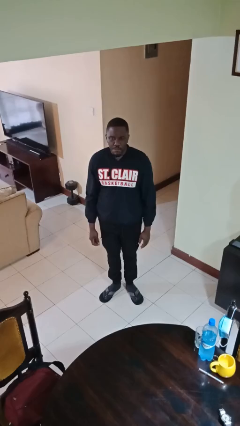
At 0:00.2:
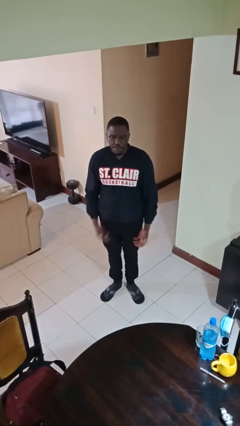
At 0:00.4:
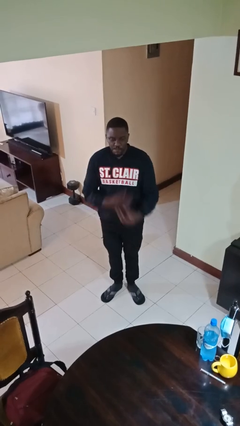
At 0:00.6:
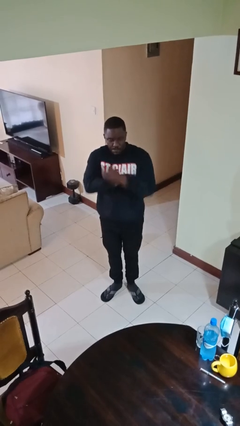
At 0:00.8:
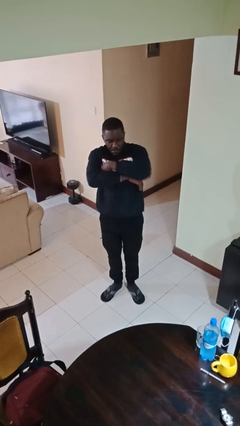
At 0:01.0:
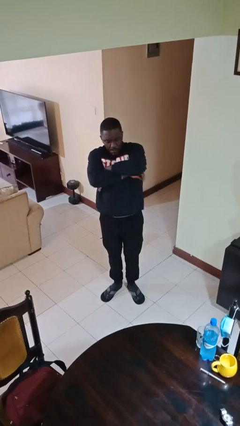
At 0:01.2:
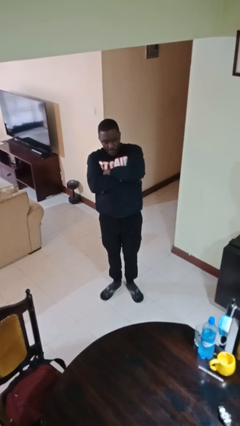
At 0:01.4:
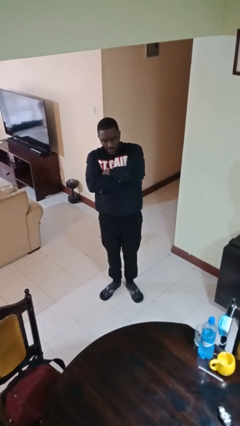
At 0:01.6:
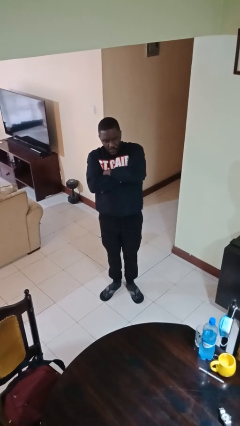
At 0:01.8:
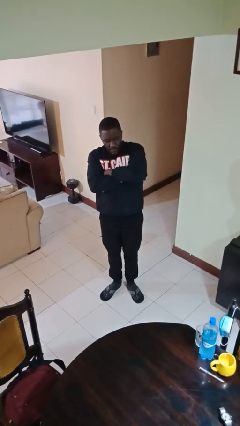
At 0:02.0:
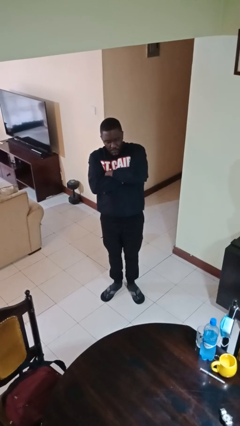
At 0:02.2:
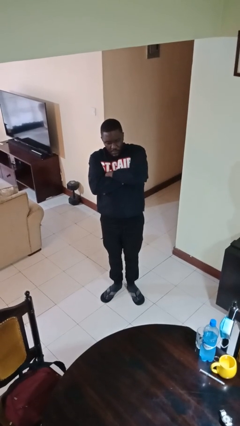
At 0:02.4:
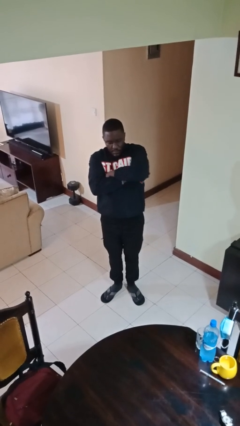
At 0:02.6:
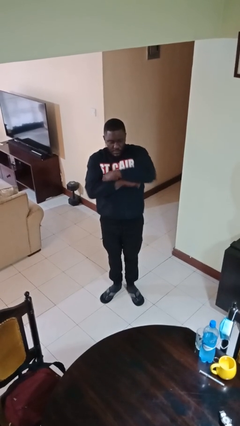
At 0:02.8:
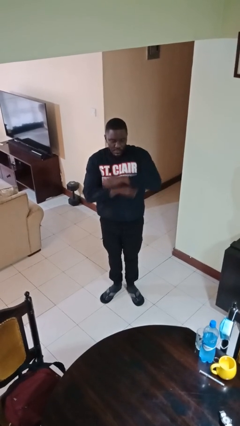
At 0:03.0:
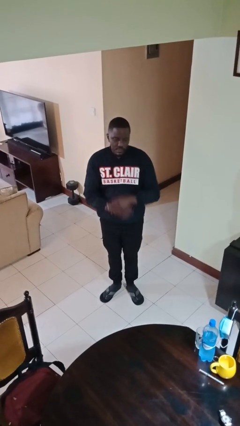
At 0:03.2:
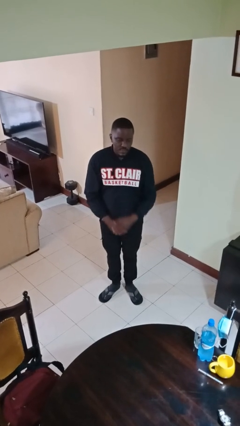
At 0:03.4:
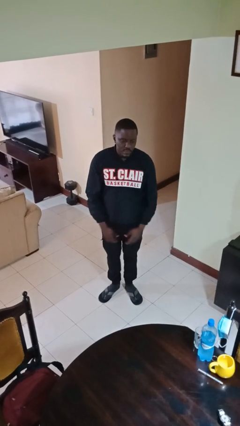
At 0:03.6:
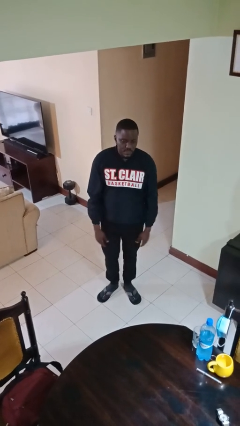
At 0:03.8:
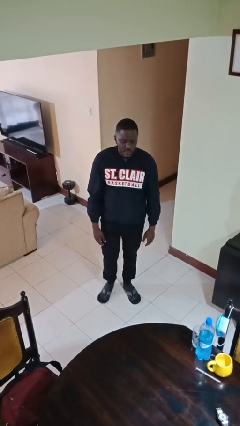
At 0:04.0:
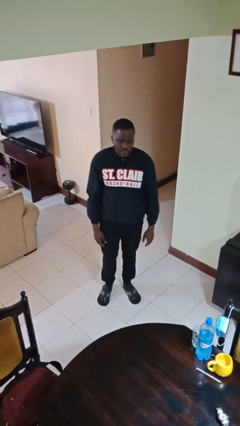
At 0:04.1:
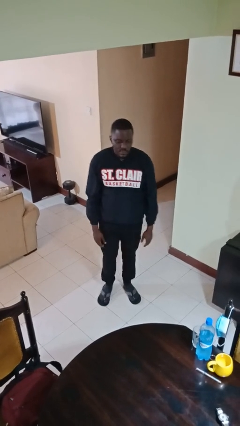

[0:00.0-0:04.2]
person crosses arms

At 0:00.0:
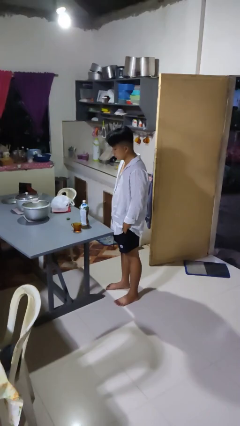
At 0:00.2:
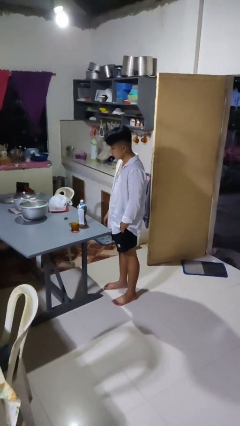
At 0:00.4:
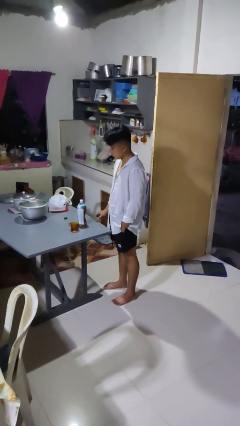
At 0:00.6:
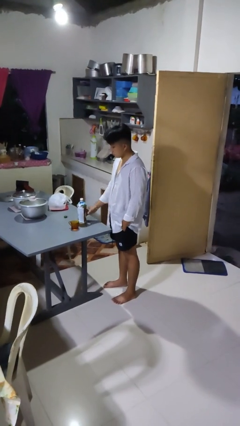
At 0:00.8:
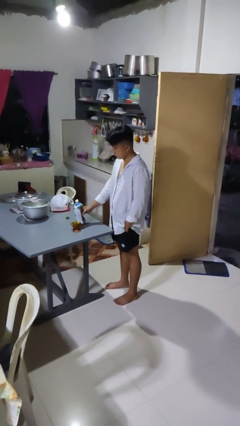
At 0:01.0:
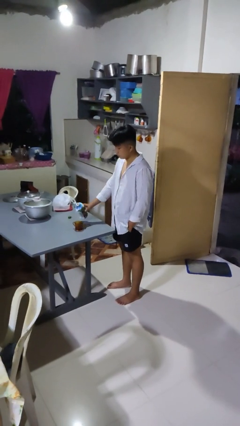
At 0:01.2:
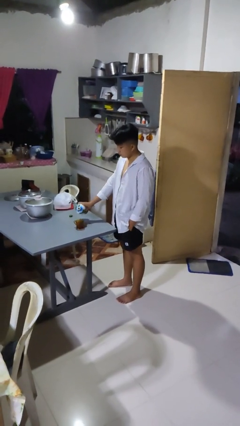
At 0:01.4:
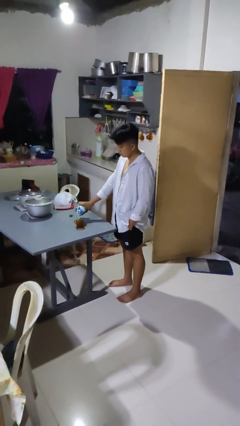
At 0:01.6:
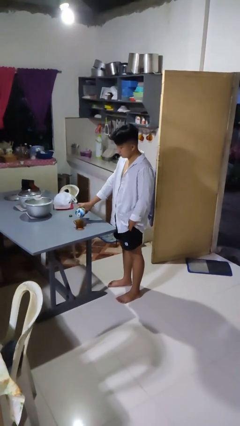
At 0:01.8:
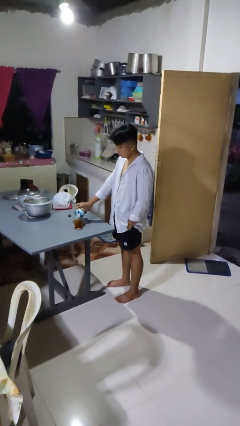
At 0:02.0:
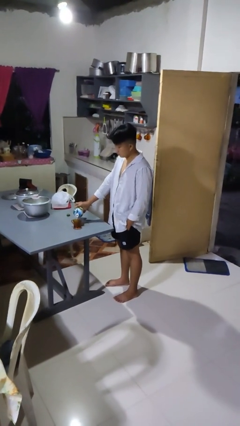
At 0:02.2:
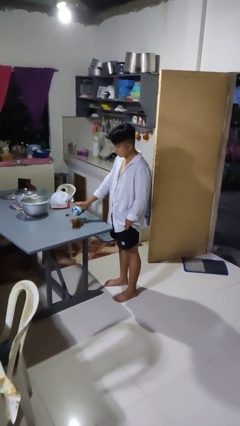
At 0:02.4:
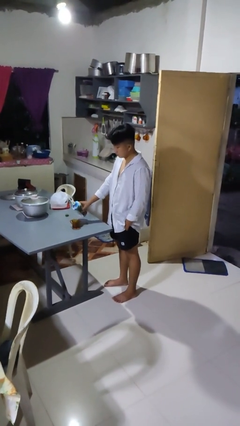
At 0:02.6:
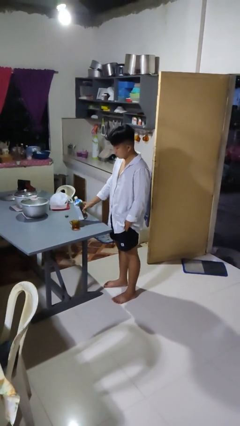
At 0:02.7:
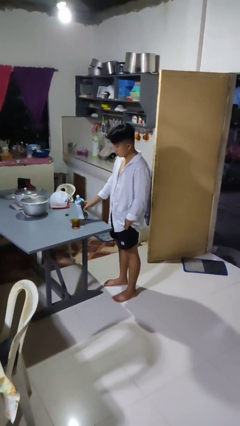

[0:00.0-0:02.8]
person pours liquid into cup

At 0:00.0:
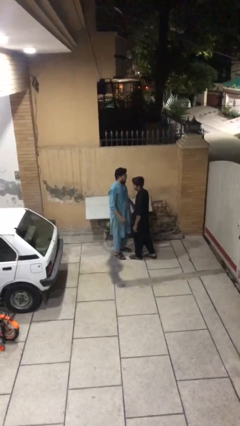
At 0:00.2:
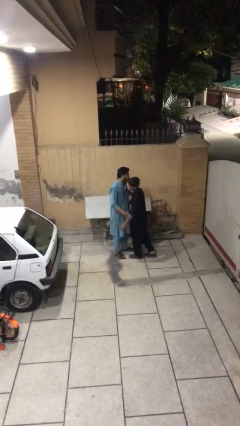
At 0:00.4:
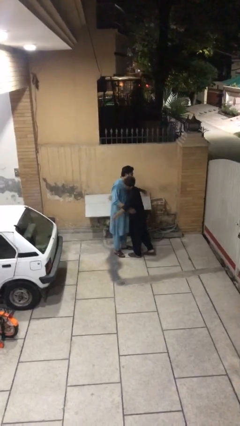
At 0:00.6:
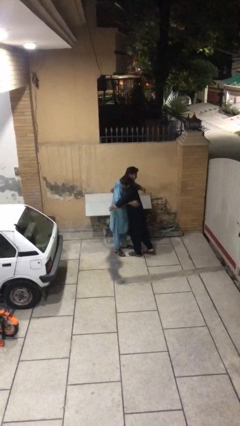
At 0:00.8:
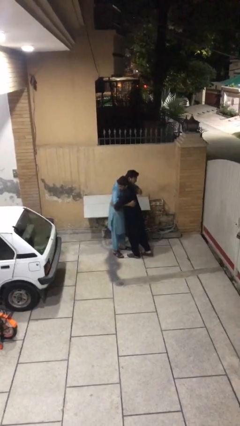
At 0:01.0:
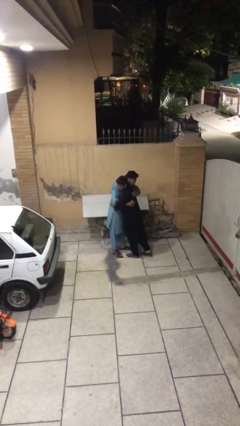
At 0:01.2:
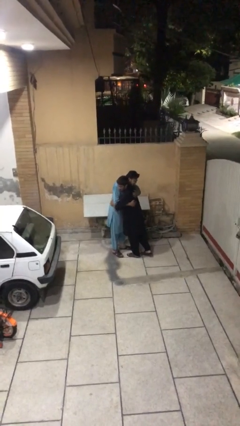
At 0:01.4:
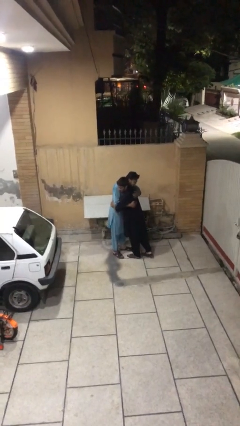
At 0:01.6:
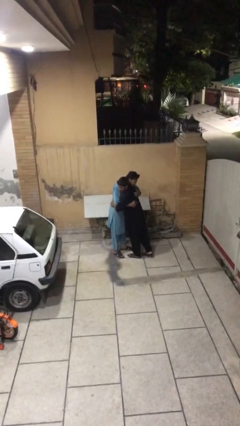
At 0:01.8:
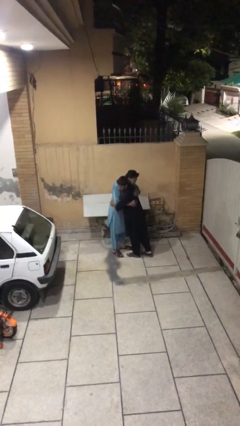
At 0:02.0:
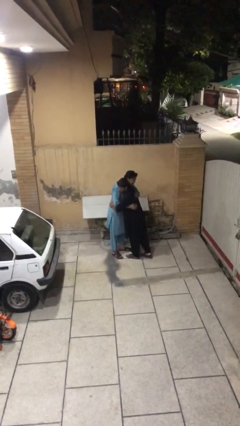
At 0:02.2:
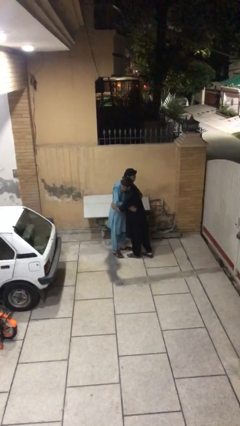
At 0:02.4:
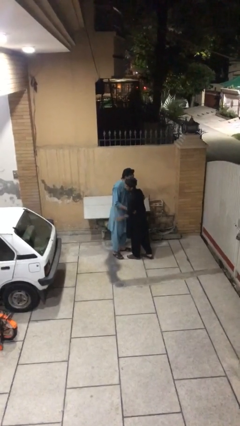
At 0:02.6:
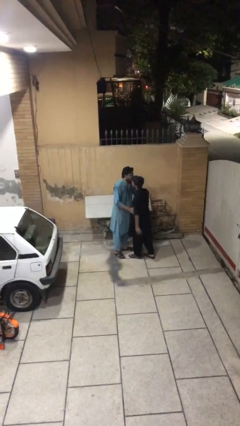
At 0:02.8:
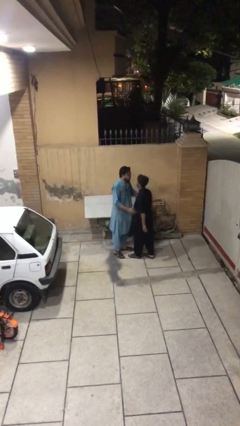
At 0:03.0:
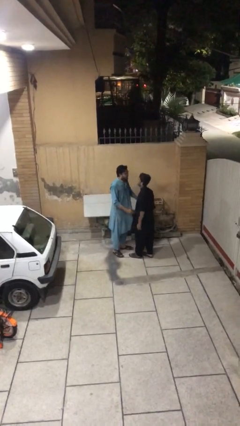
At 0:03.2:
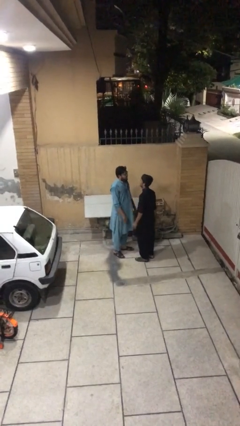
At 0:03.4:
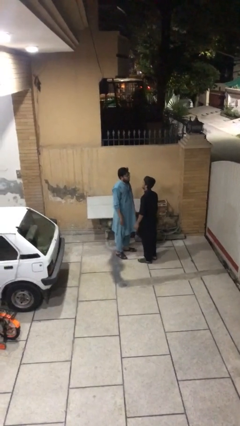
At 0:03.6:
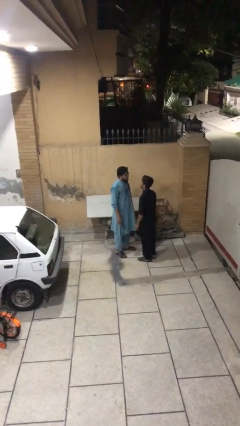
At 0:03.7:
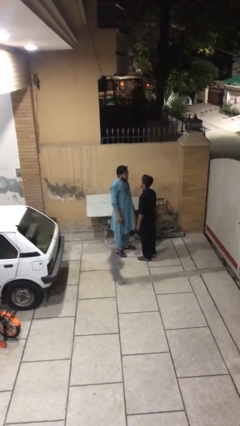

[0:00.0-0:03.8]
person embraces person

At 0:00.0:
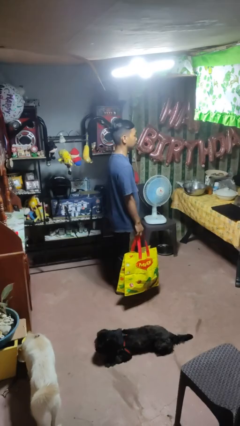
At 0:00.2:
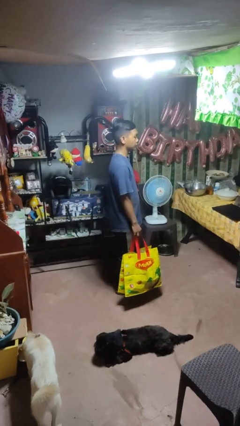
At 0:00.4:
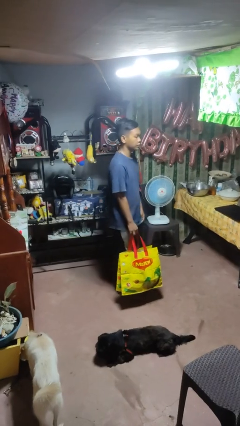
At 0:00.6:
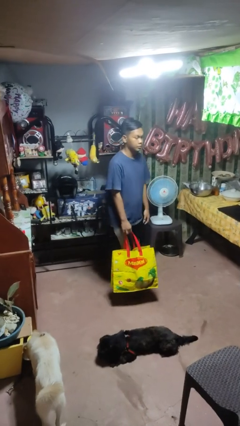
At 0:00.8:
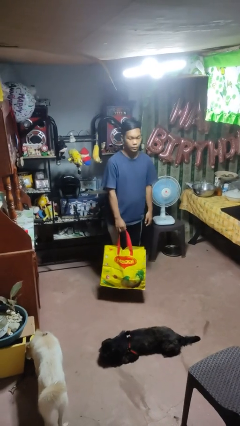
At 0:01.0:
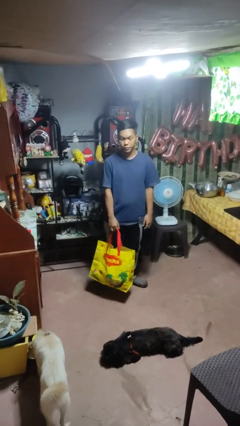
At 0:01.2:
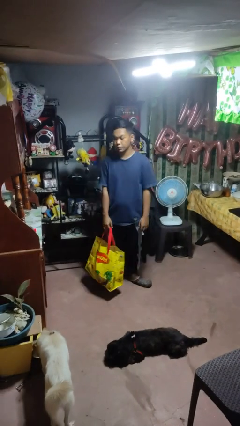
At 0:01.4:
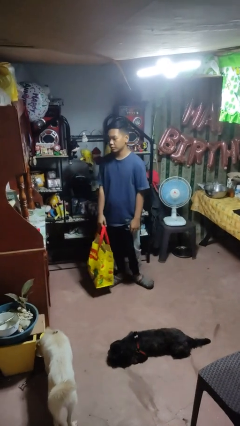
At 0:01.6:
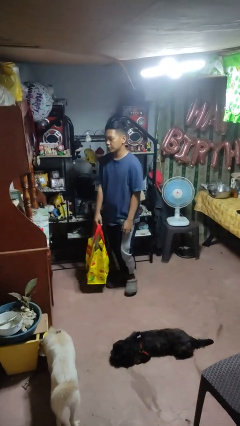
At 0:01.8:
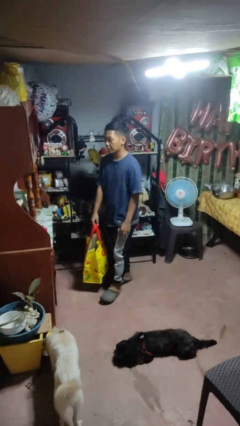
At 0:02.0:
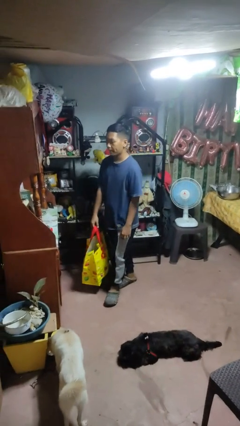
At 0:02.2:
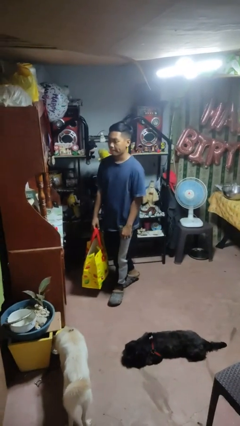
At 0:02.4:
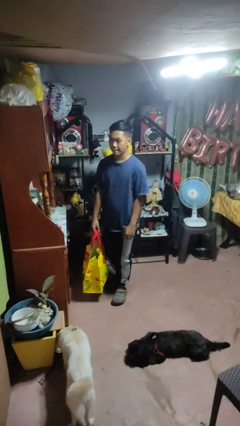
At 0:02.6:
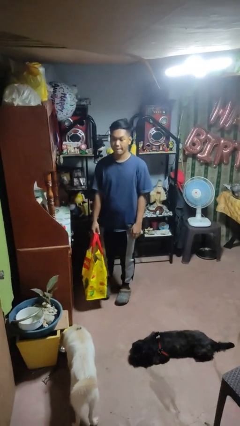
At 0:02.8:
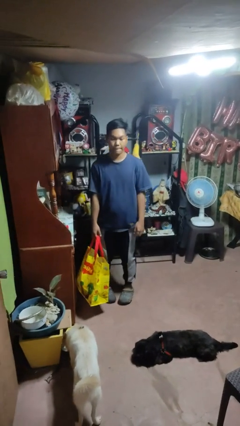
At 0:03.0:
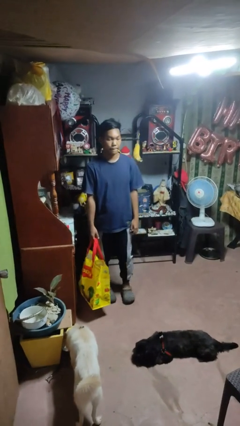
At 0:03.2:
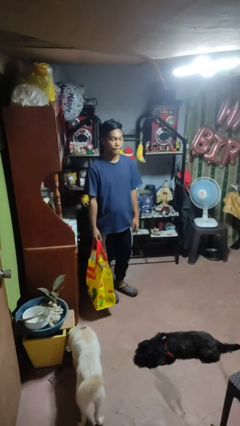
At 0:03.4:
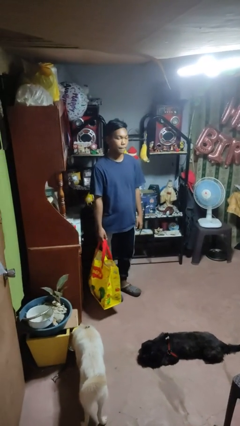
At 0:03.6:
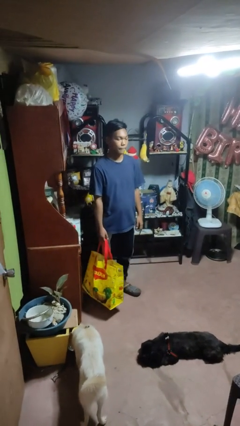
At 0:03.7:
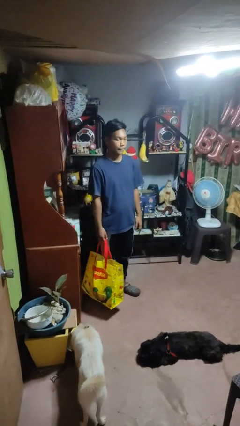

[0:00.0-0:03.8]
person carries groceries

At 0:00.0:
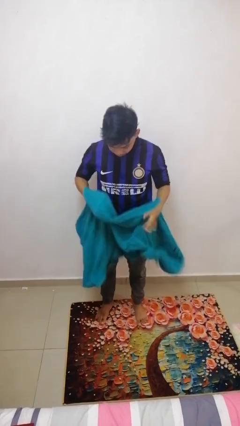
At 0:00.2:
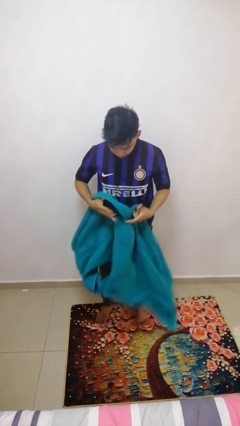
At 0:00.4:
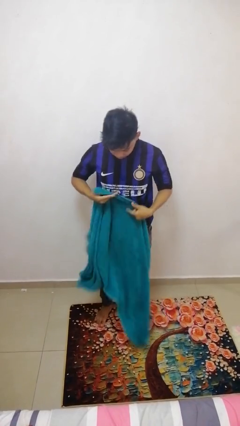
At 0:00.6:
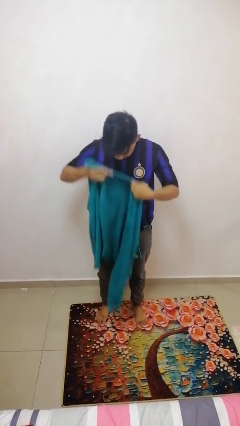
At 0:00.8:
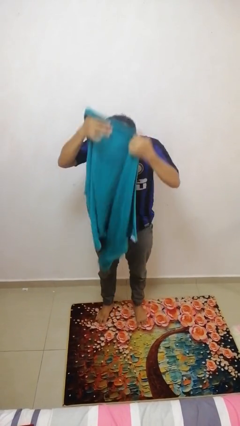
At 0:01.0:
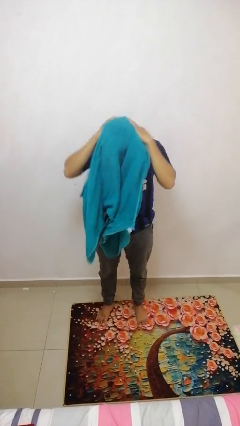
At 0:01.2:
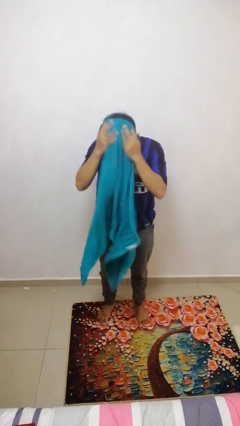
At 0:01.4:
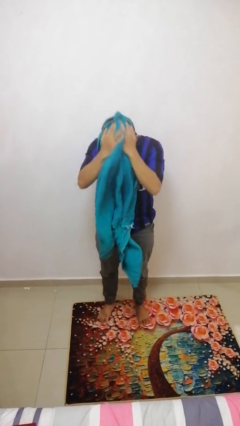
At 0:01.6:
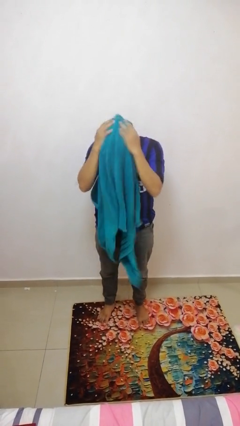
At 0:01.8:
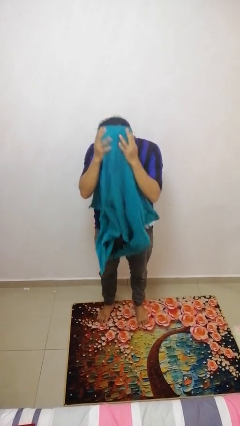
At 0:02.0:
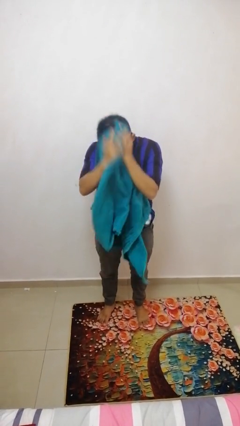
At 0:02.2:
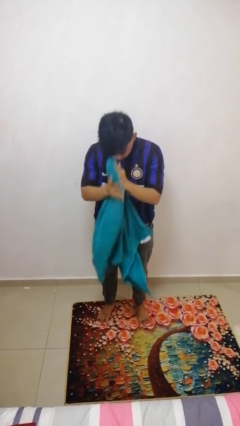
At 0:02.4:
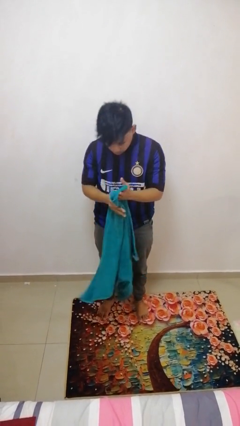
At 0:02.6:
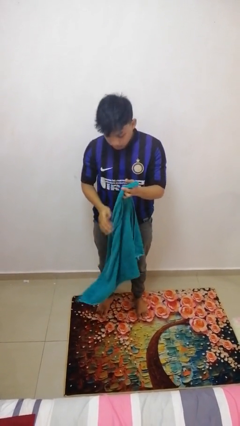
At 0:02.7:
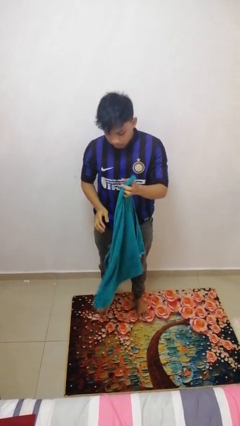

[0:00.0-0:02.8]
person dries hair with towel
